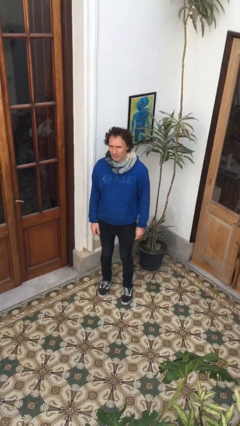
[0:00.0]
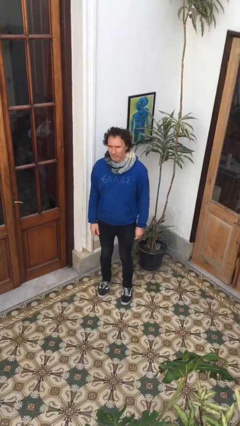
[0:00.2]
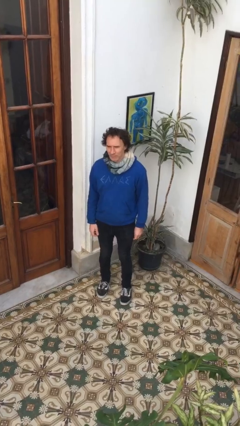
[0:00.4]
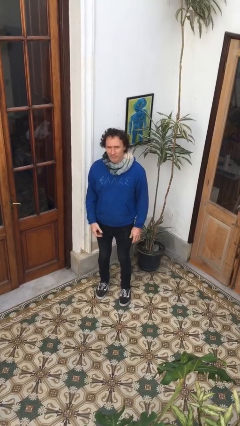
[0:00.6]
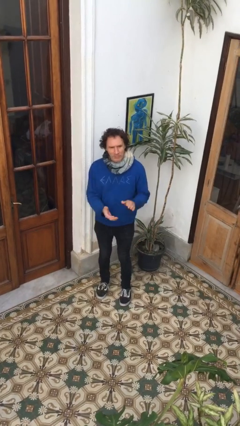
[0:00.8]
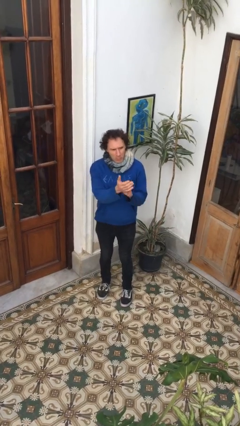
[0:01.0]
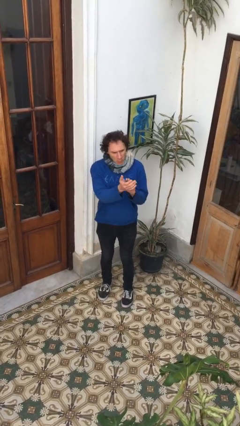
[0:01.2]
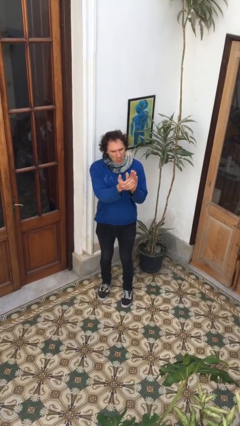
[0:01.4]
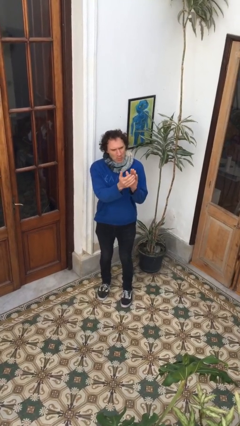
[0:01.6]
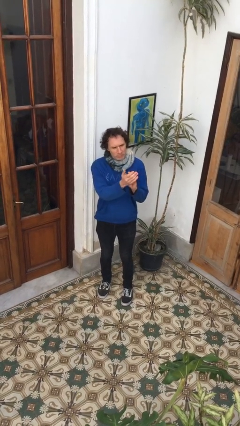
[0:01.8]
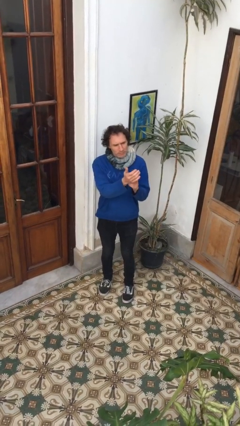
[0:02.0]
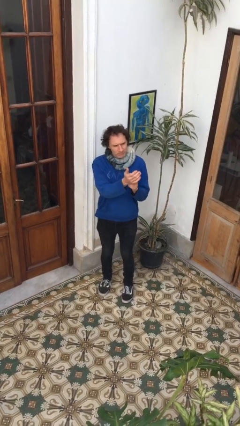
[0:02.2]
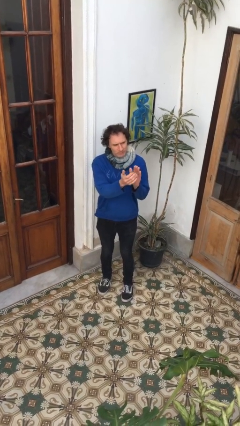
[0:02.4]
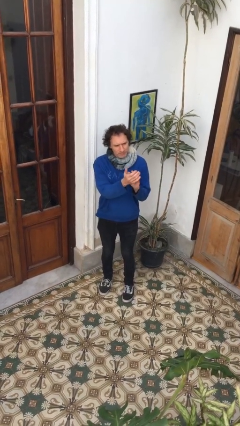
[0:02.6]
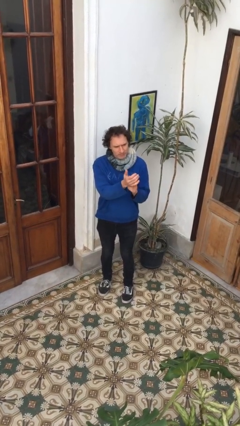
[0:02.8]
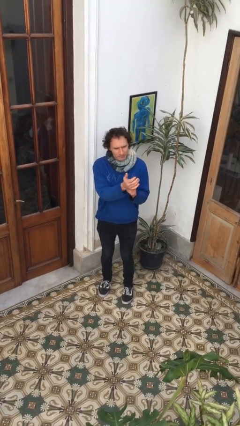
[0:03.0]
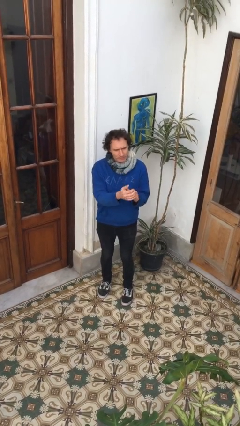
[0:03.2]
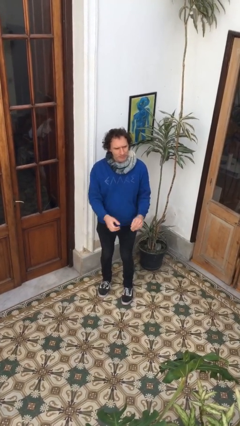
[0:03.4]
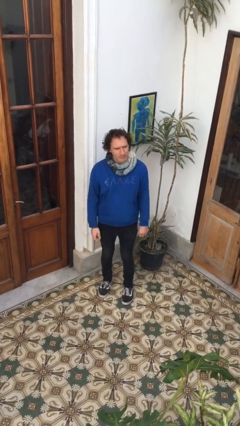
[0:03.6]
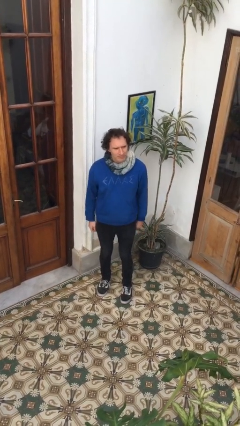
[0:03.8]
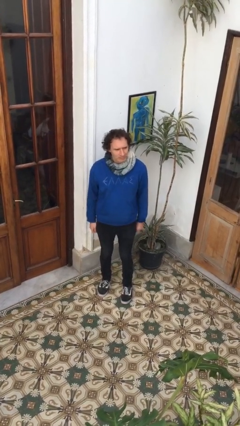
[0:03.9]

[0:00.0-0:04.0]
person claps hands

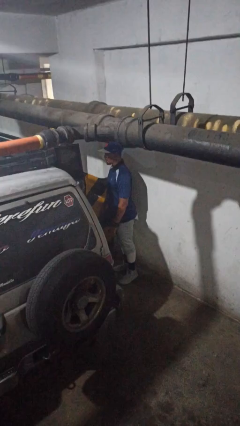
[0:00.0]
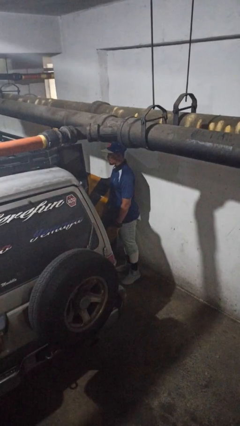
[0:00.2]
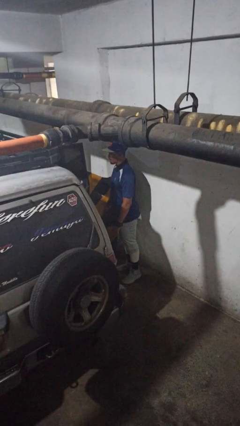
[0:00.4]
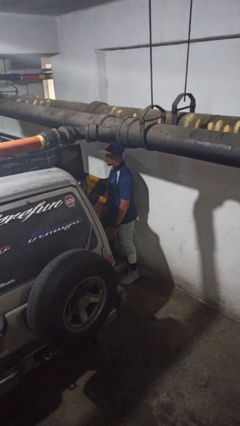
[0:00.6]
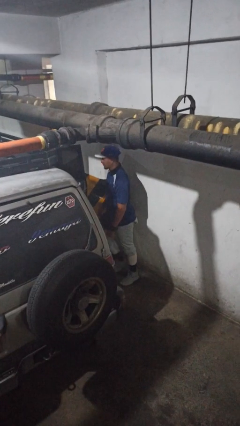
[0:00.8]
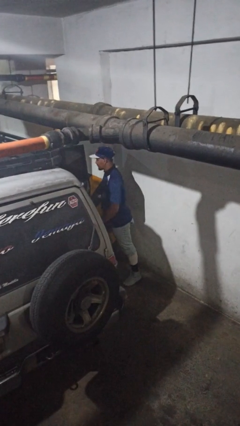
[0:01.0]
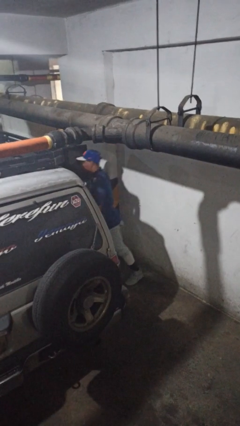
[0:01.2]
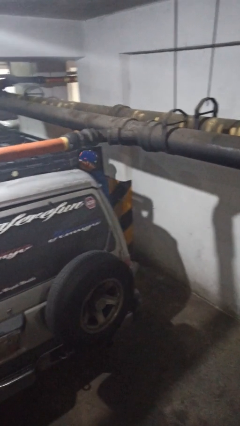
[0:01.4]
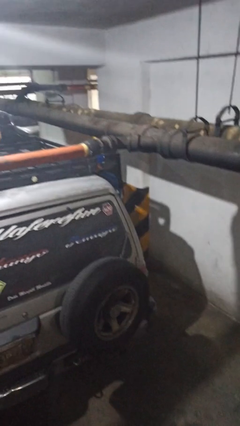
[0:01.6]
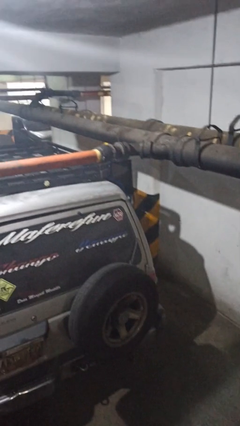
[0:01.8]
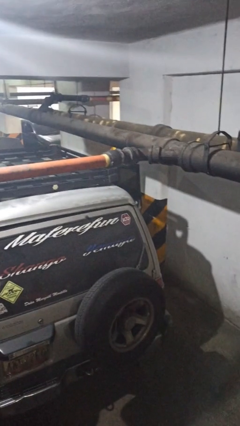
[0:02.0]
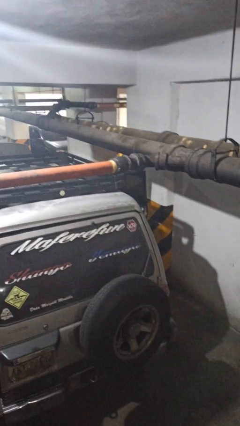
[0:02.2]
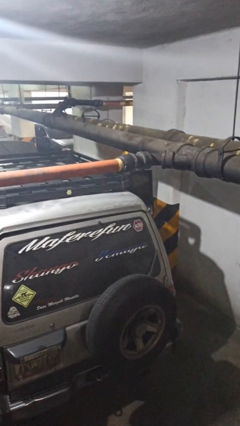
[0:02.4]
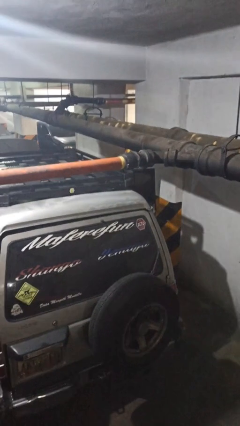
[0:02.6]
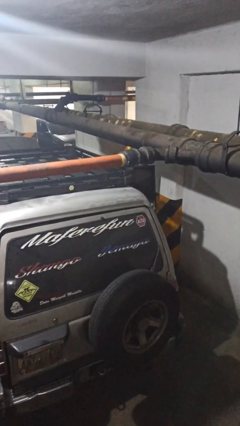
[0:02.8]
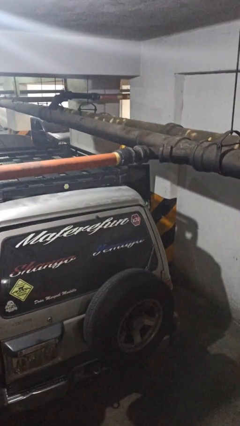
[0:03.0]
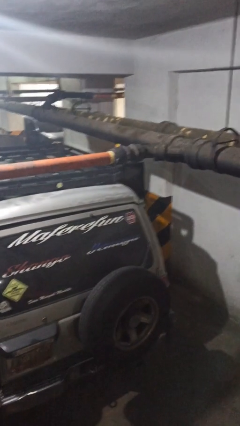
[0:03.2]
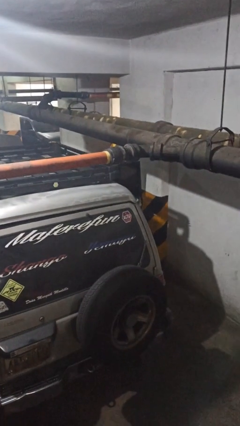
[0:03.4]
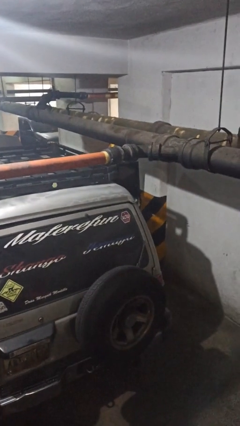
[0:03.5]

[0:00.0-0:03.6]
person enters car

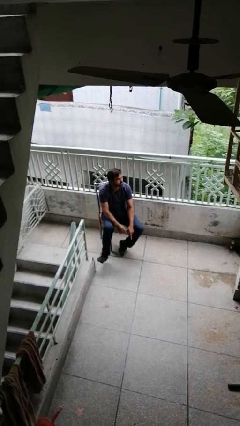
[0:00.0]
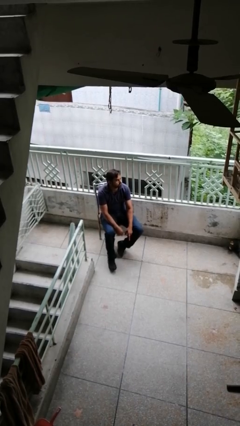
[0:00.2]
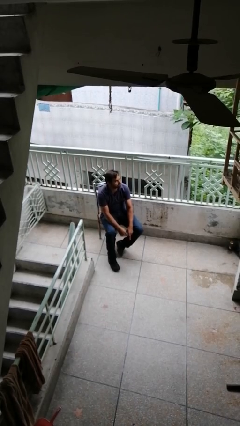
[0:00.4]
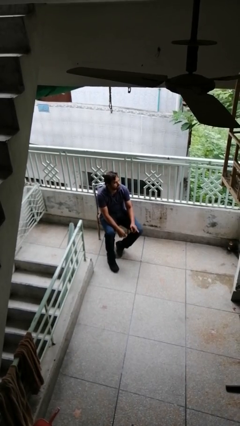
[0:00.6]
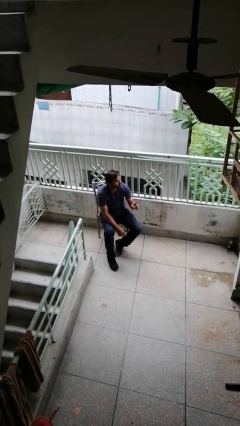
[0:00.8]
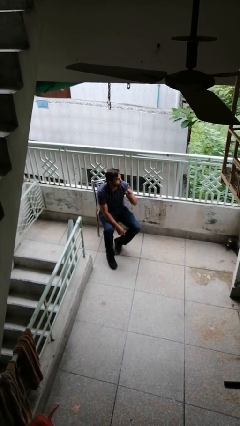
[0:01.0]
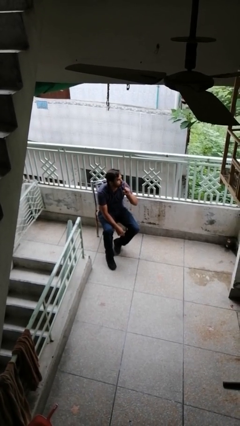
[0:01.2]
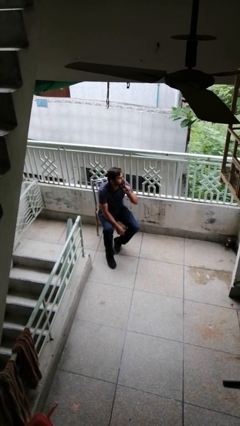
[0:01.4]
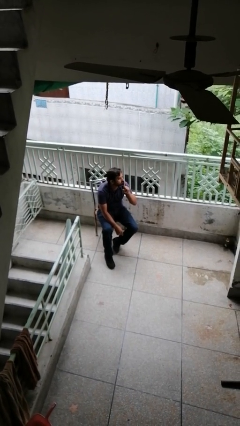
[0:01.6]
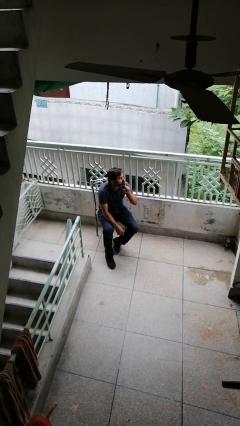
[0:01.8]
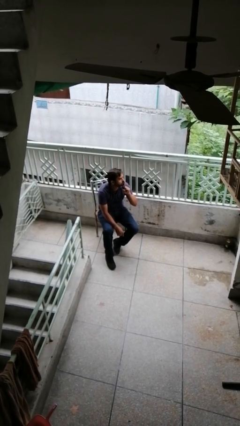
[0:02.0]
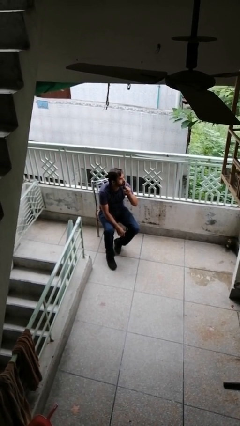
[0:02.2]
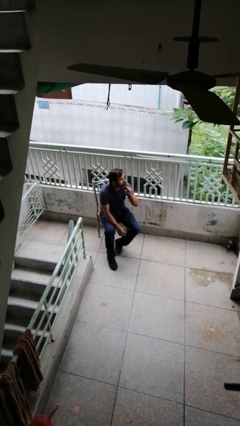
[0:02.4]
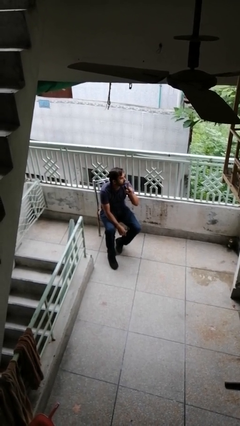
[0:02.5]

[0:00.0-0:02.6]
person gestures be quiet

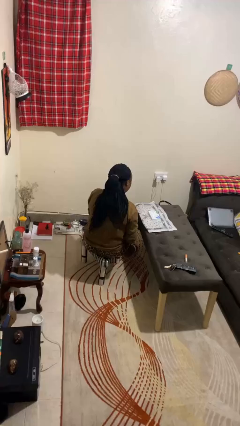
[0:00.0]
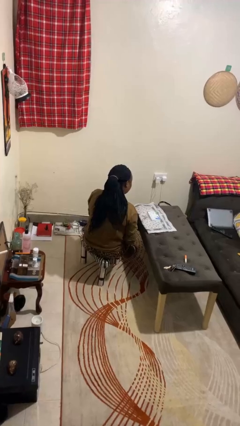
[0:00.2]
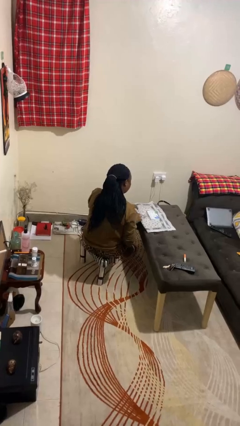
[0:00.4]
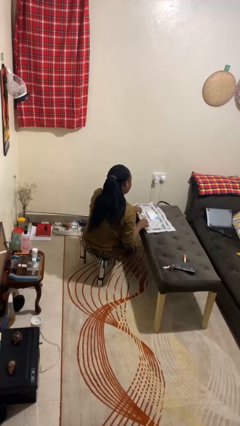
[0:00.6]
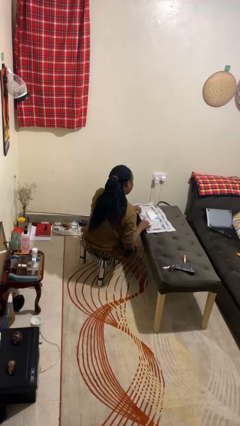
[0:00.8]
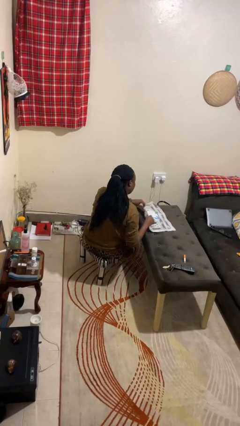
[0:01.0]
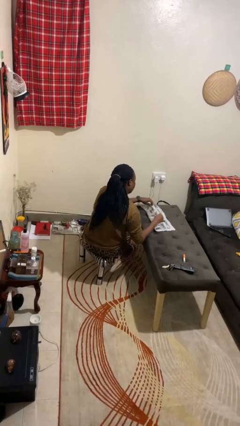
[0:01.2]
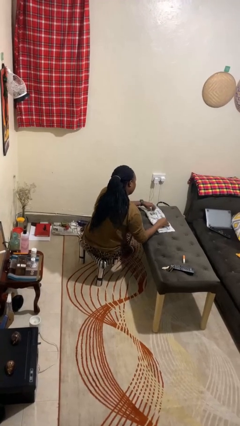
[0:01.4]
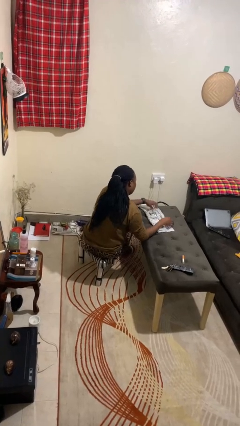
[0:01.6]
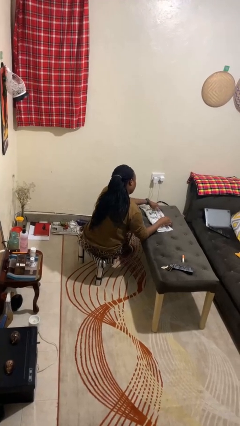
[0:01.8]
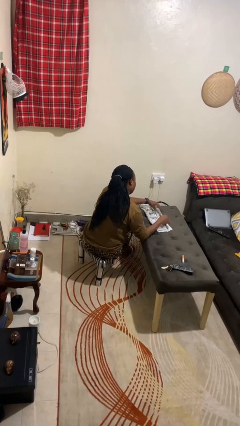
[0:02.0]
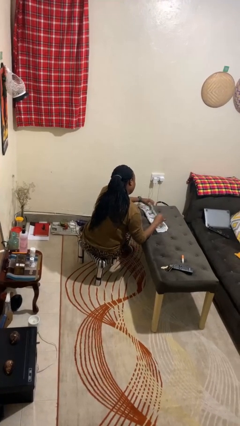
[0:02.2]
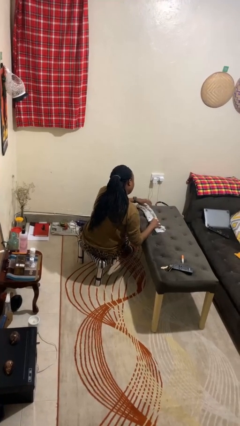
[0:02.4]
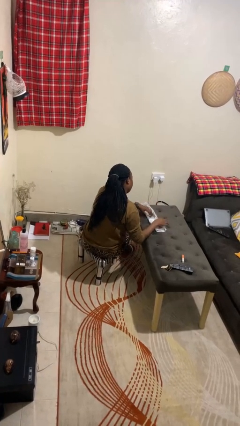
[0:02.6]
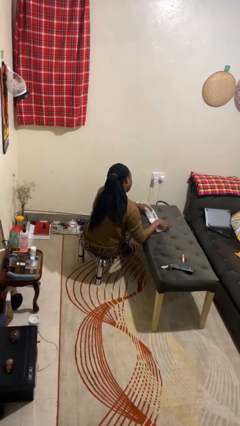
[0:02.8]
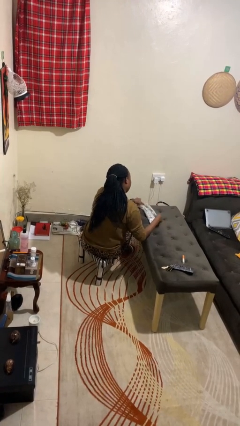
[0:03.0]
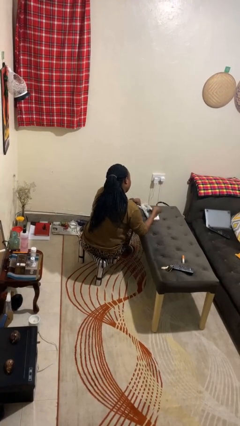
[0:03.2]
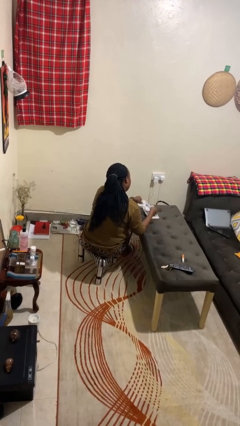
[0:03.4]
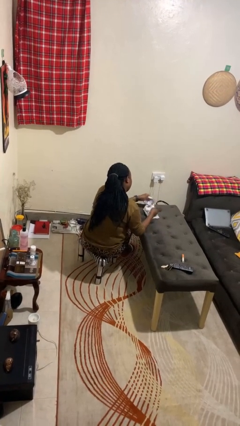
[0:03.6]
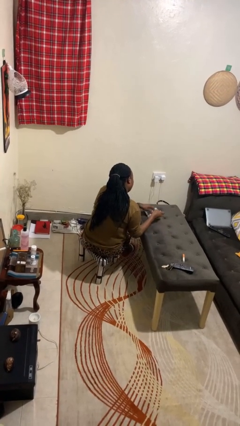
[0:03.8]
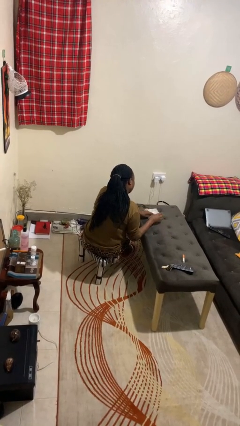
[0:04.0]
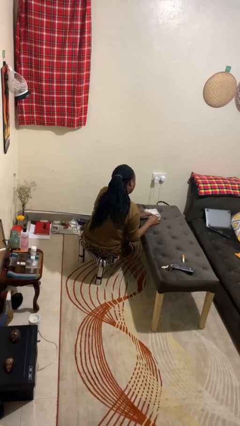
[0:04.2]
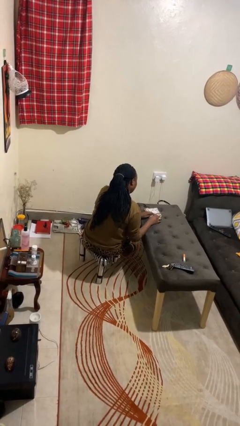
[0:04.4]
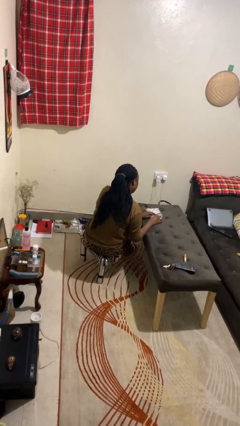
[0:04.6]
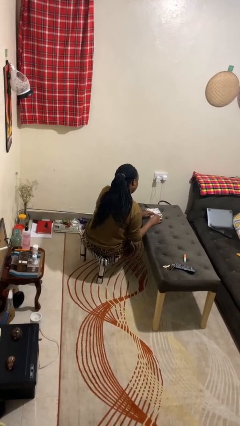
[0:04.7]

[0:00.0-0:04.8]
person wraps box

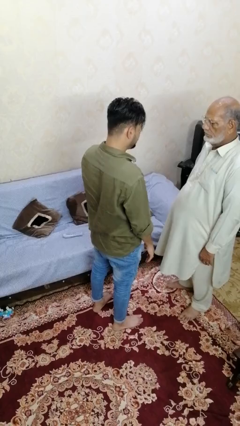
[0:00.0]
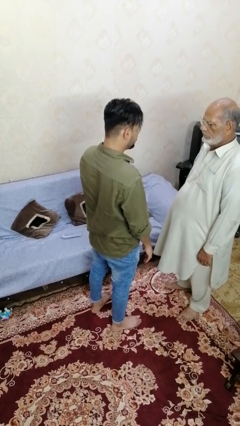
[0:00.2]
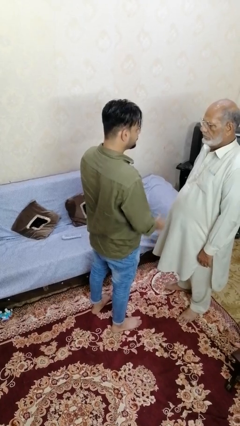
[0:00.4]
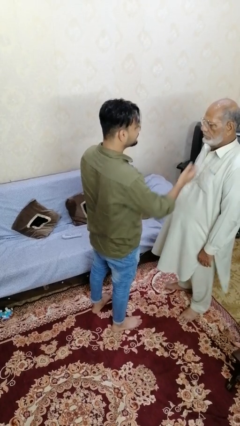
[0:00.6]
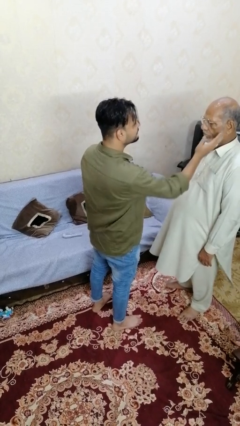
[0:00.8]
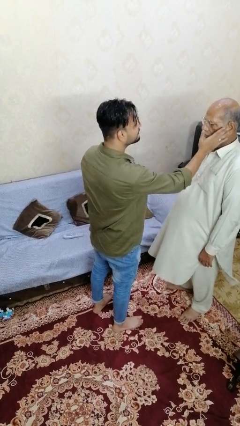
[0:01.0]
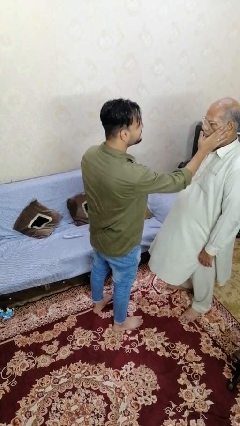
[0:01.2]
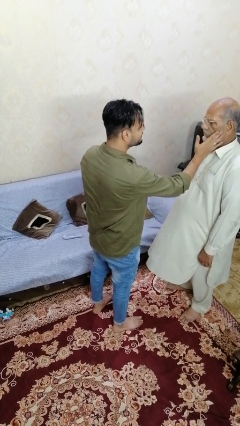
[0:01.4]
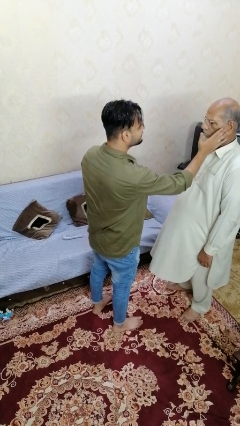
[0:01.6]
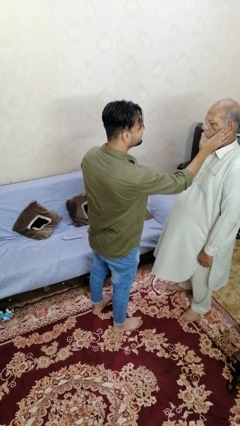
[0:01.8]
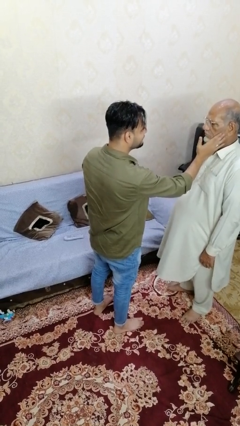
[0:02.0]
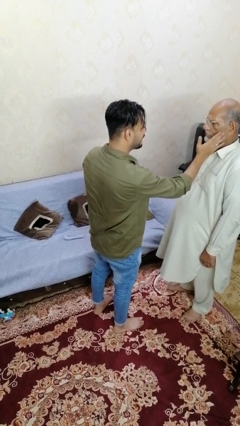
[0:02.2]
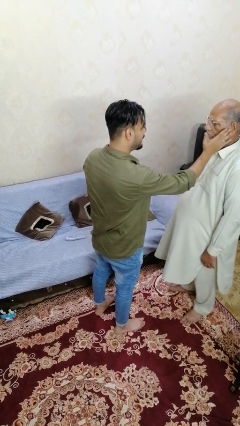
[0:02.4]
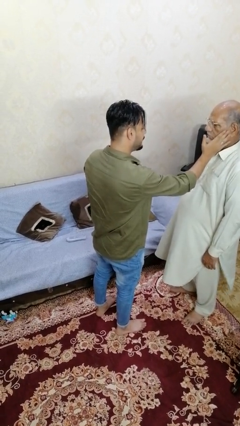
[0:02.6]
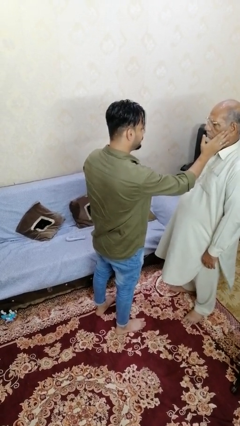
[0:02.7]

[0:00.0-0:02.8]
person touches face of person
